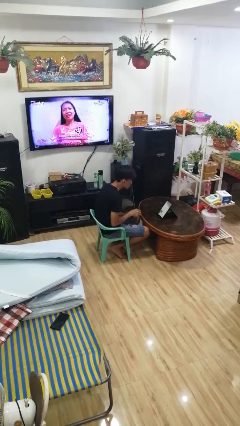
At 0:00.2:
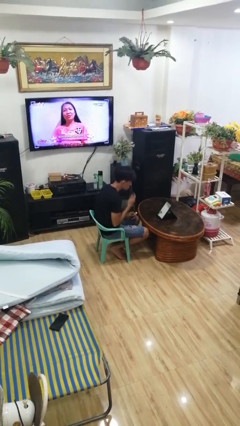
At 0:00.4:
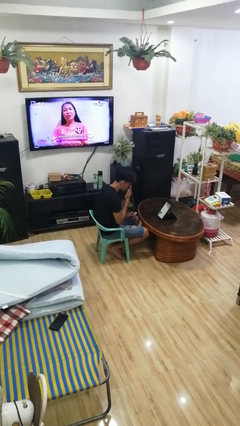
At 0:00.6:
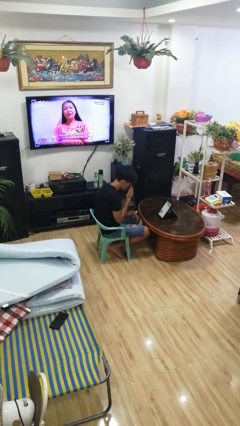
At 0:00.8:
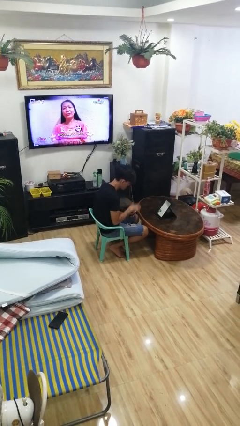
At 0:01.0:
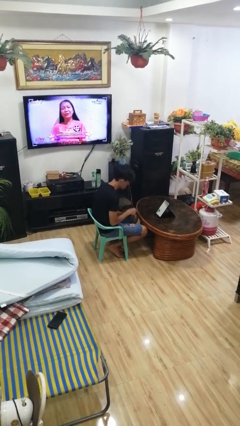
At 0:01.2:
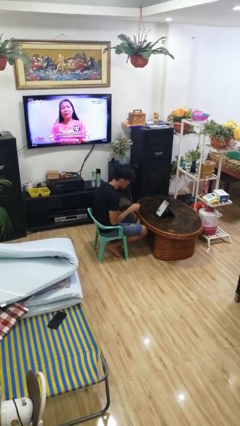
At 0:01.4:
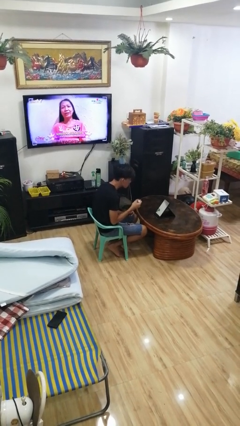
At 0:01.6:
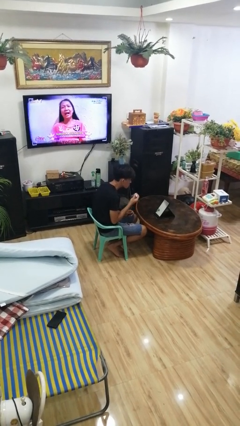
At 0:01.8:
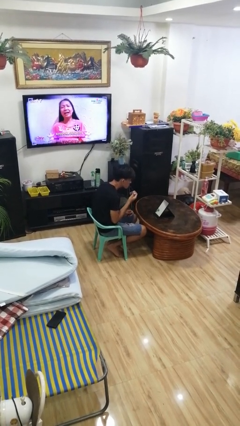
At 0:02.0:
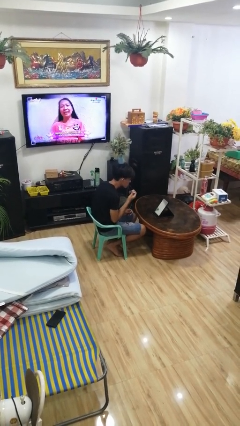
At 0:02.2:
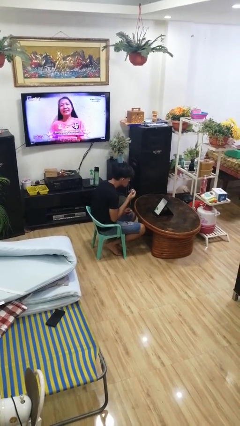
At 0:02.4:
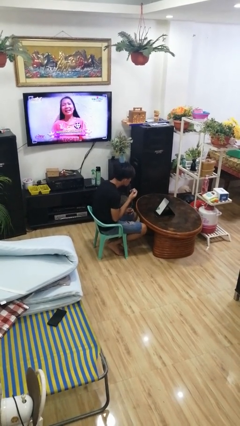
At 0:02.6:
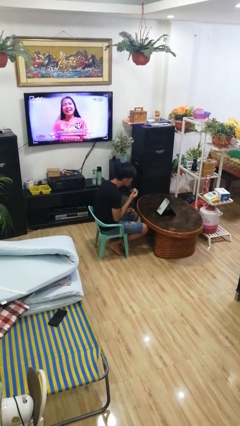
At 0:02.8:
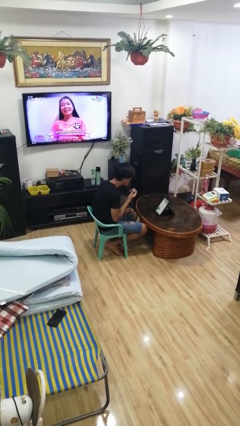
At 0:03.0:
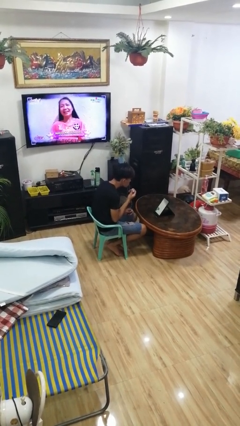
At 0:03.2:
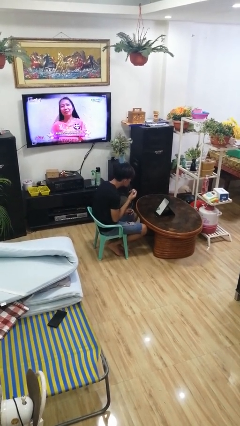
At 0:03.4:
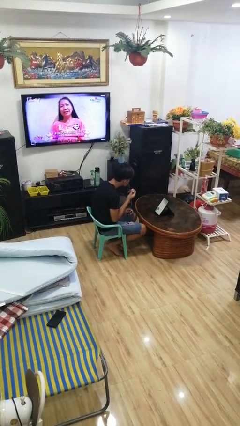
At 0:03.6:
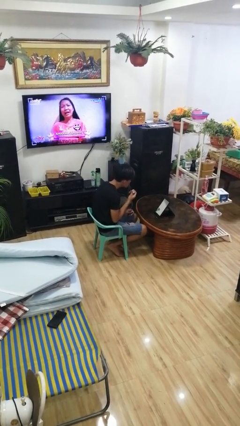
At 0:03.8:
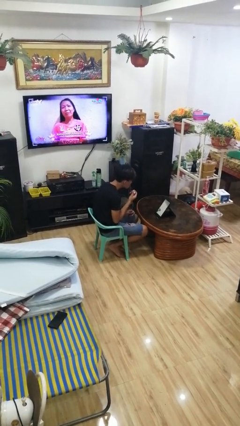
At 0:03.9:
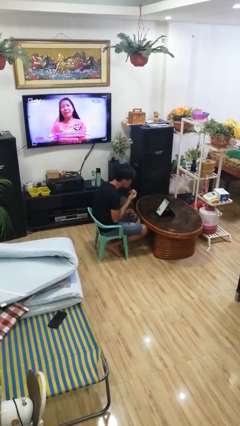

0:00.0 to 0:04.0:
person applies lip makeup

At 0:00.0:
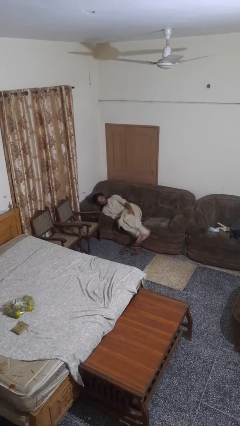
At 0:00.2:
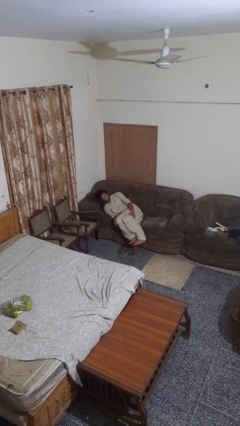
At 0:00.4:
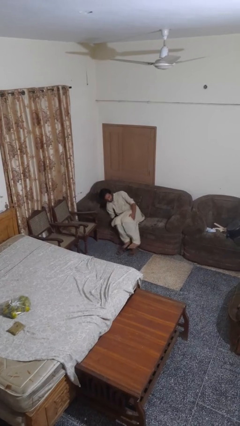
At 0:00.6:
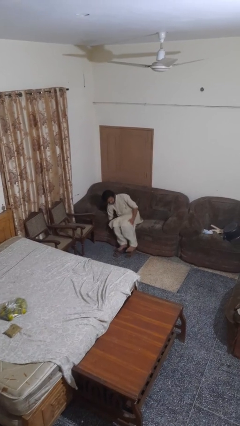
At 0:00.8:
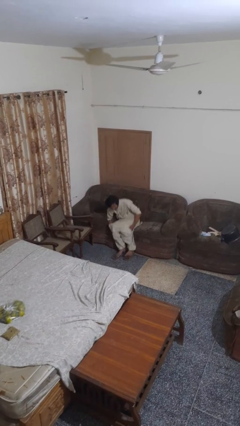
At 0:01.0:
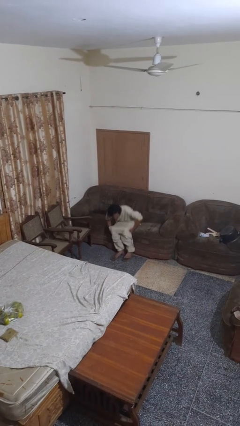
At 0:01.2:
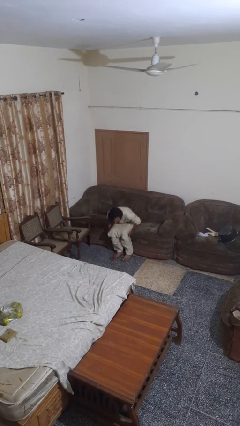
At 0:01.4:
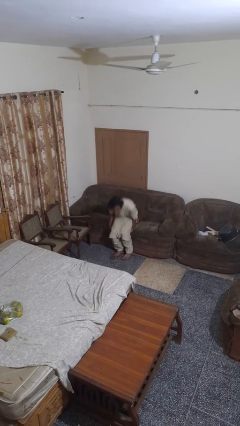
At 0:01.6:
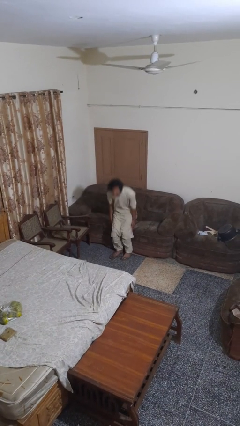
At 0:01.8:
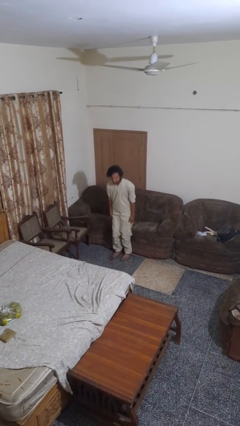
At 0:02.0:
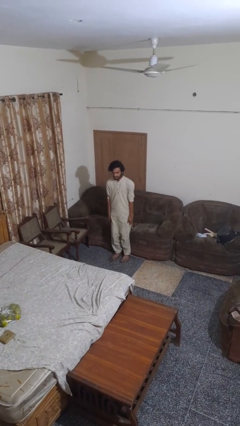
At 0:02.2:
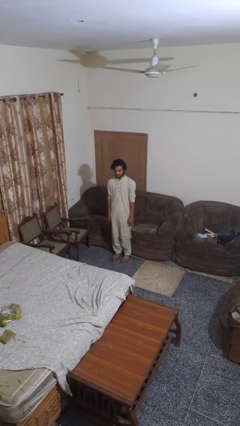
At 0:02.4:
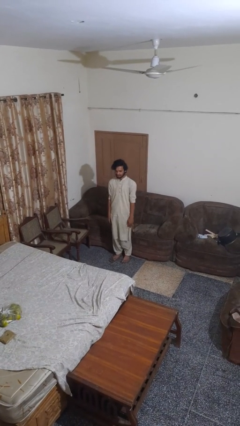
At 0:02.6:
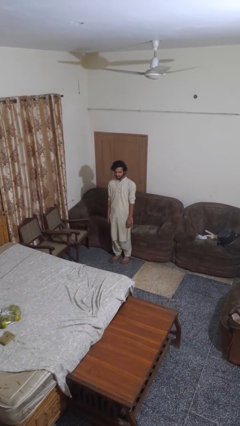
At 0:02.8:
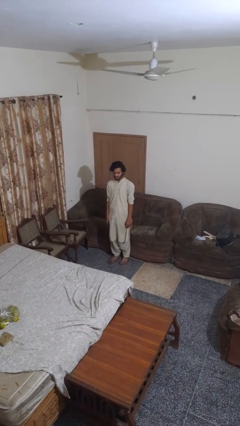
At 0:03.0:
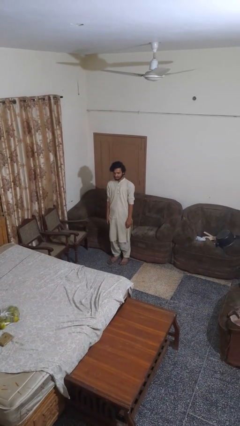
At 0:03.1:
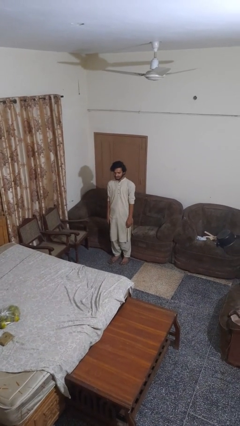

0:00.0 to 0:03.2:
person stands up

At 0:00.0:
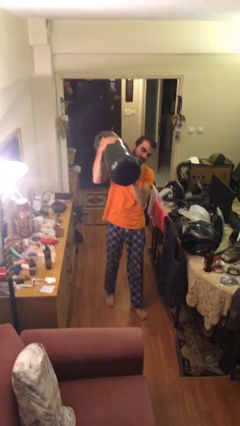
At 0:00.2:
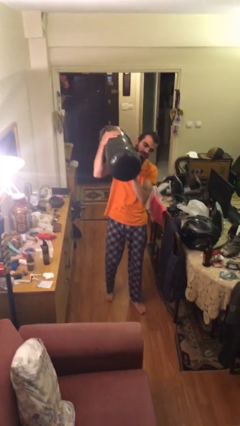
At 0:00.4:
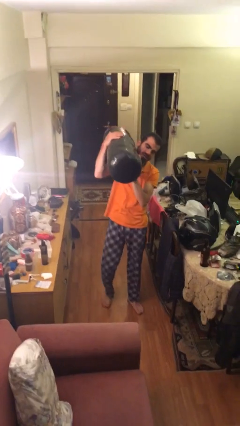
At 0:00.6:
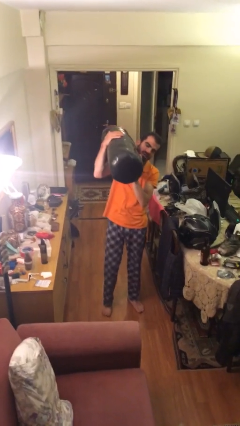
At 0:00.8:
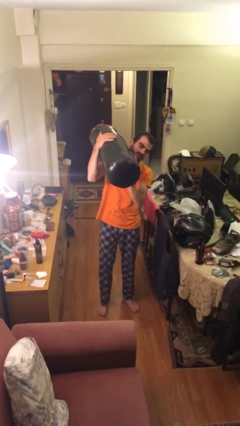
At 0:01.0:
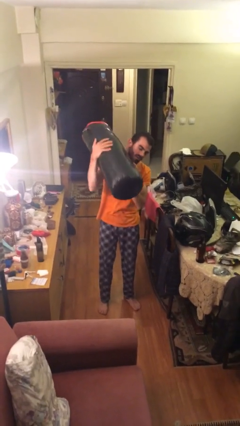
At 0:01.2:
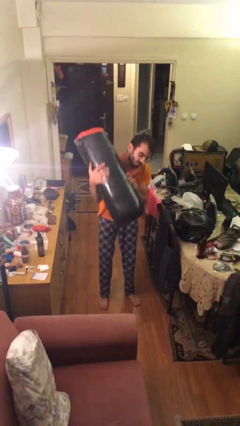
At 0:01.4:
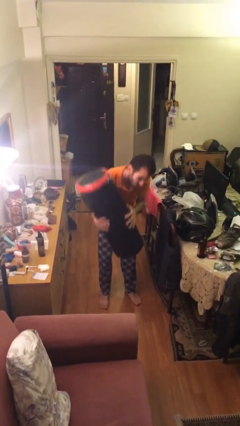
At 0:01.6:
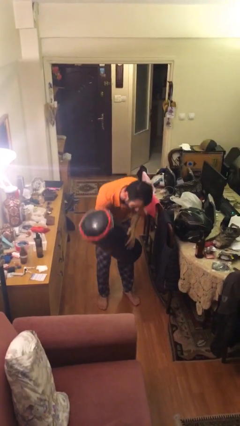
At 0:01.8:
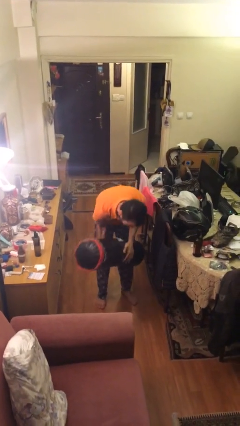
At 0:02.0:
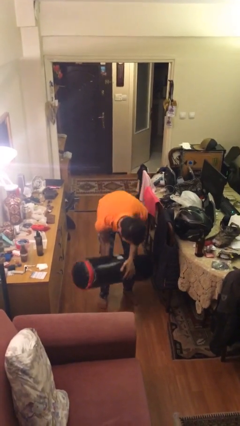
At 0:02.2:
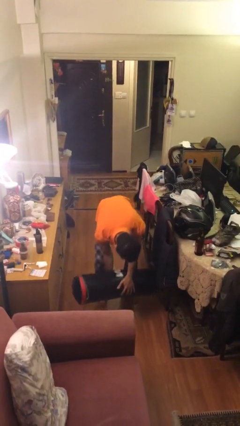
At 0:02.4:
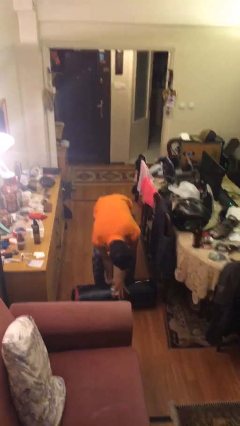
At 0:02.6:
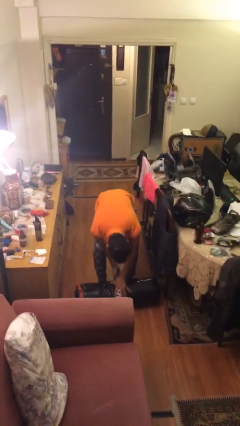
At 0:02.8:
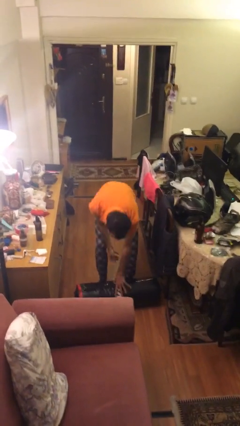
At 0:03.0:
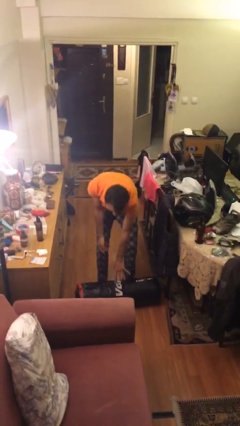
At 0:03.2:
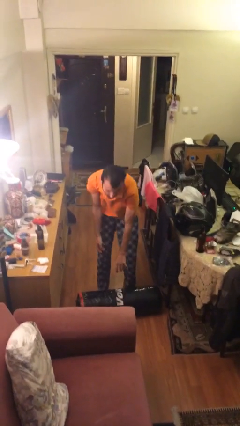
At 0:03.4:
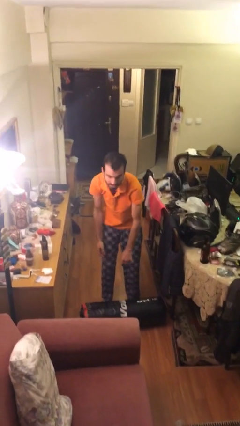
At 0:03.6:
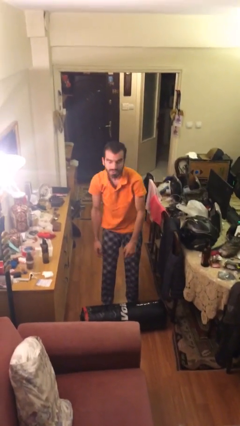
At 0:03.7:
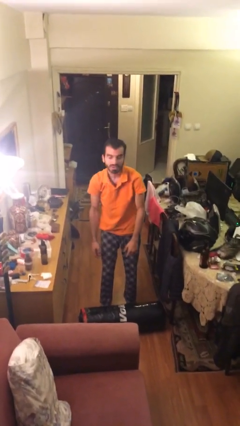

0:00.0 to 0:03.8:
person puts down object on floor

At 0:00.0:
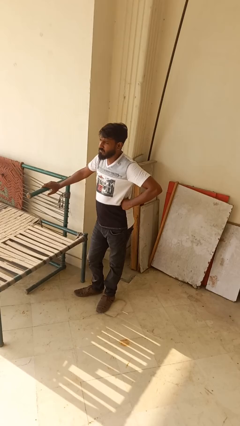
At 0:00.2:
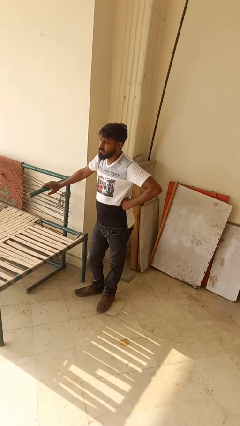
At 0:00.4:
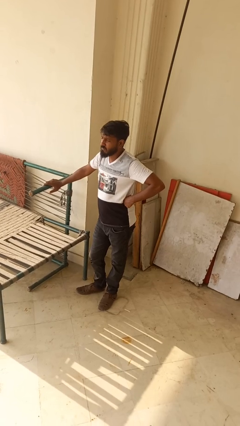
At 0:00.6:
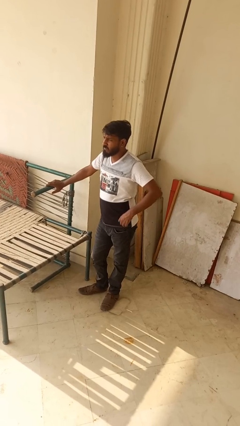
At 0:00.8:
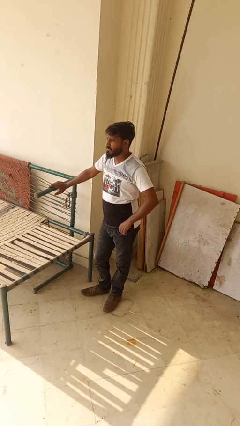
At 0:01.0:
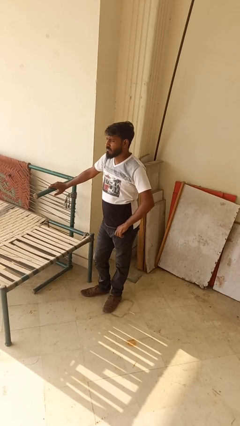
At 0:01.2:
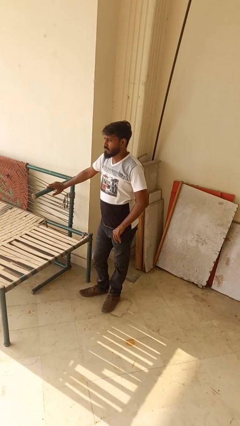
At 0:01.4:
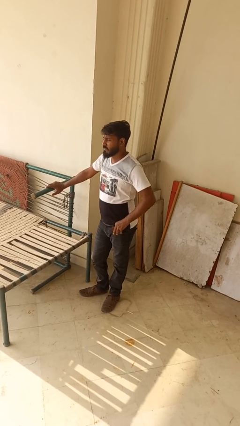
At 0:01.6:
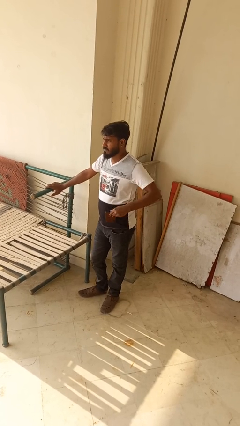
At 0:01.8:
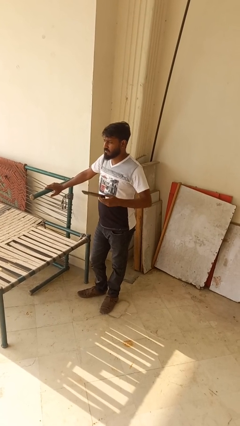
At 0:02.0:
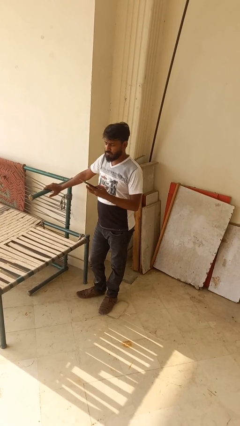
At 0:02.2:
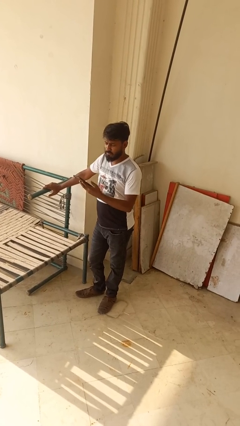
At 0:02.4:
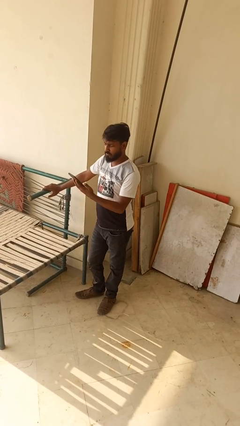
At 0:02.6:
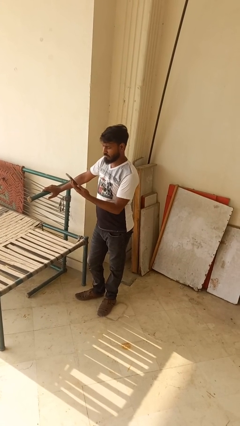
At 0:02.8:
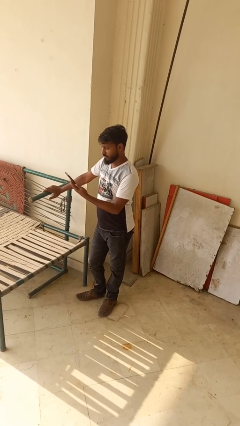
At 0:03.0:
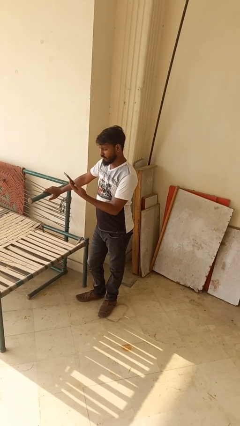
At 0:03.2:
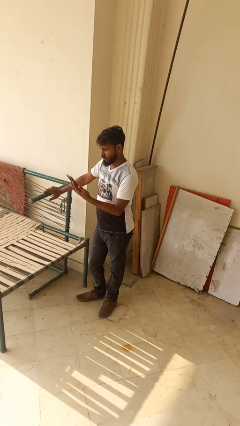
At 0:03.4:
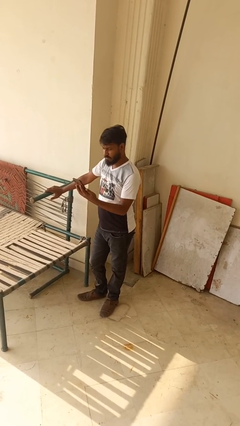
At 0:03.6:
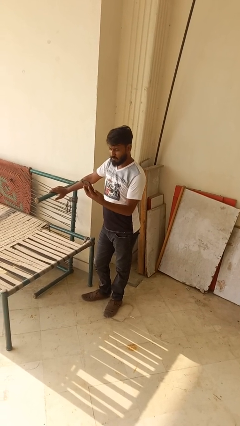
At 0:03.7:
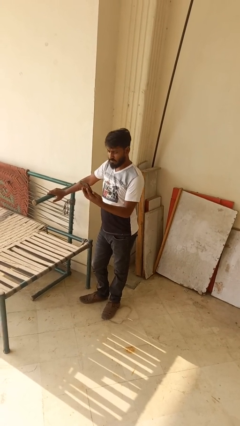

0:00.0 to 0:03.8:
person takes phone from pocket

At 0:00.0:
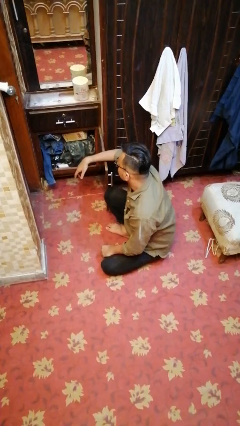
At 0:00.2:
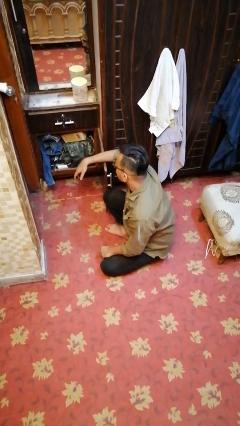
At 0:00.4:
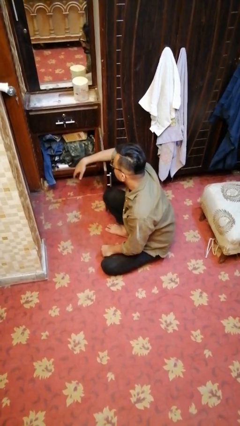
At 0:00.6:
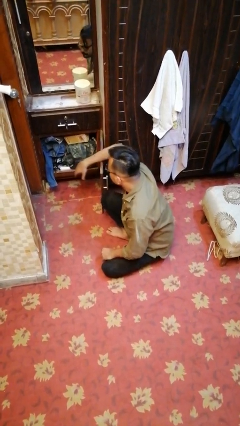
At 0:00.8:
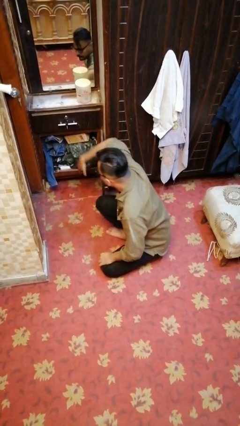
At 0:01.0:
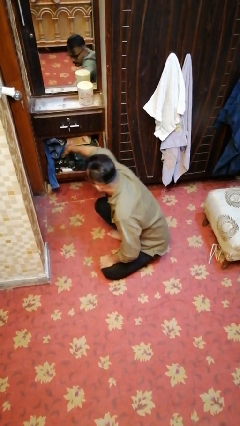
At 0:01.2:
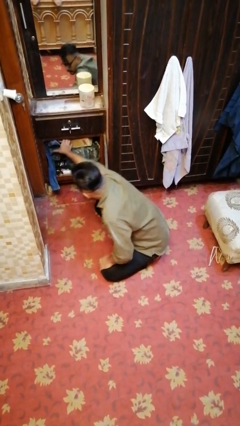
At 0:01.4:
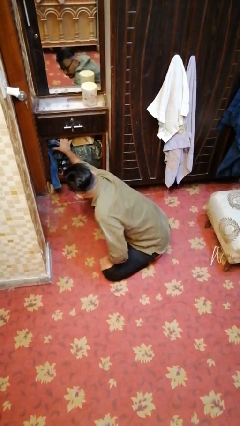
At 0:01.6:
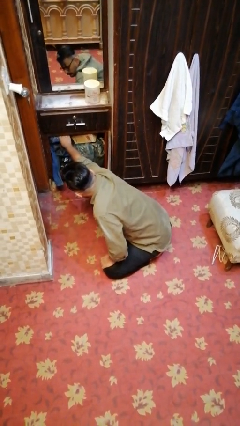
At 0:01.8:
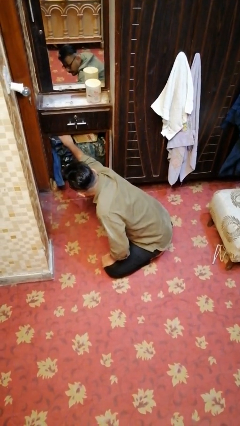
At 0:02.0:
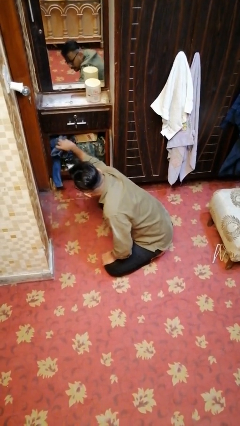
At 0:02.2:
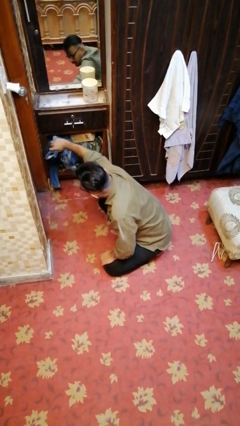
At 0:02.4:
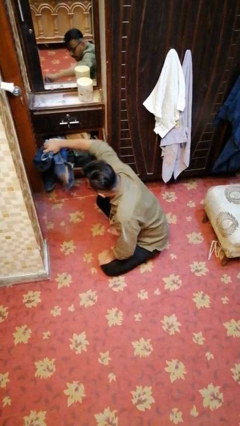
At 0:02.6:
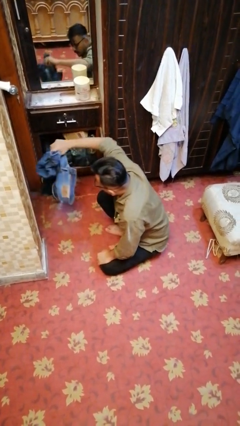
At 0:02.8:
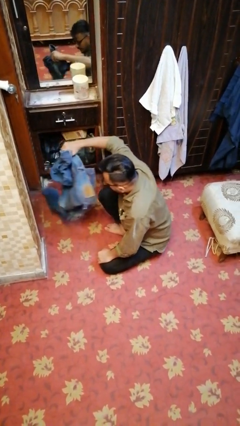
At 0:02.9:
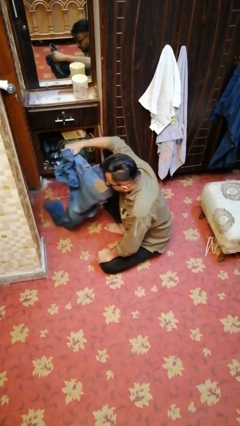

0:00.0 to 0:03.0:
person takes clothes from dresser
